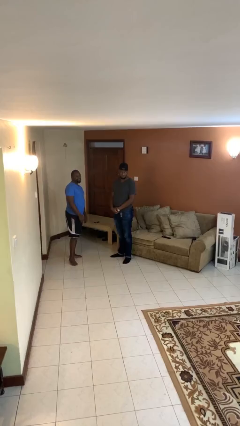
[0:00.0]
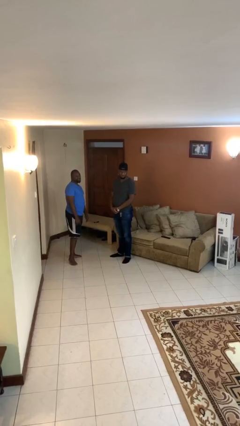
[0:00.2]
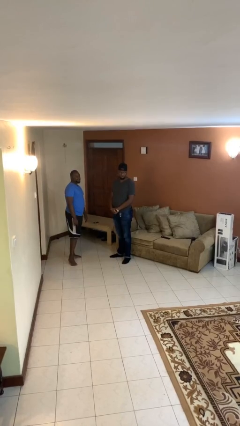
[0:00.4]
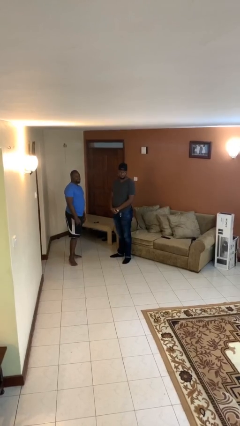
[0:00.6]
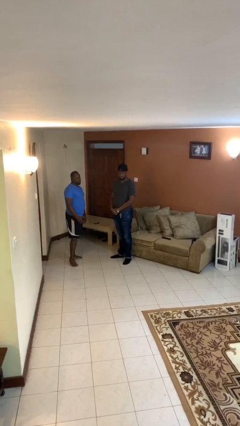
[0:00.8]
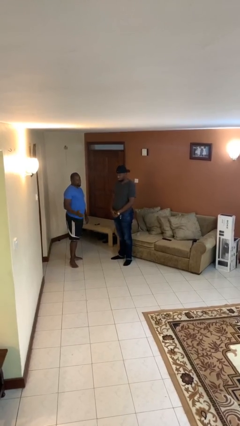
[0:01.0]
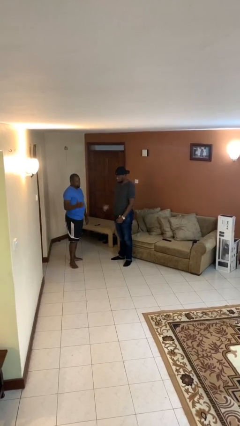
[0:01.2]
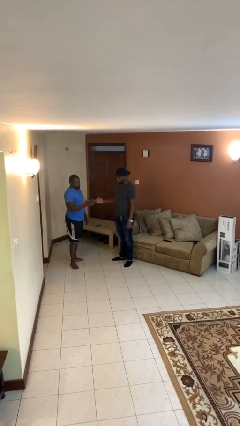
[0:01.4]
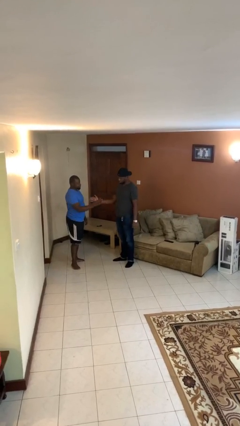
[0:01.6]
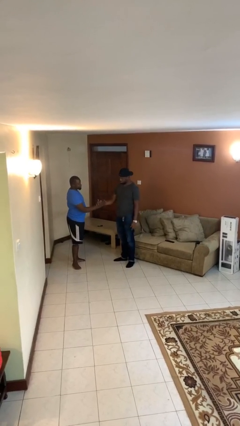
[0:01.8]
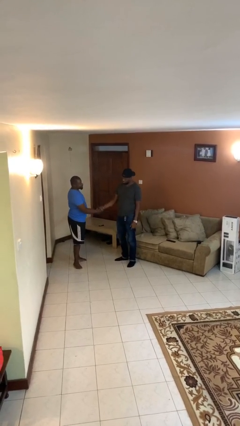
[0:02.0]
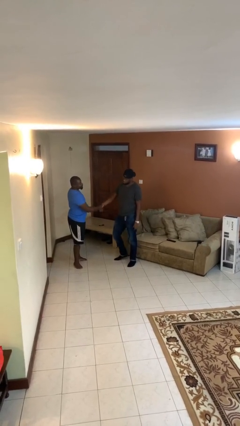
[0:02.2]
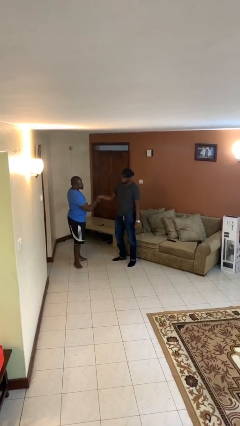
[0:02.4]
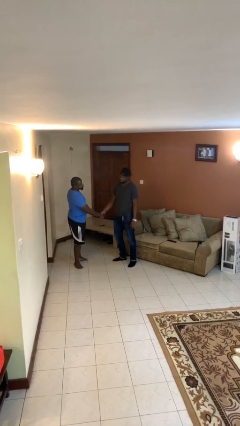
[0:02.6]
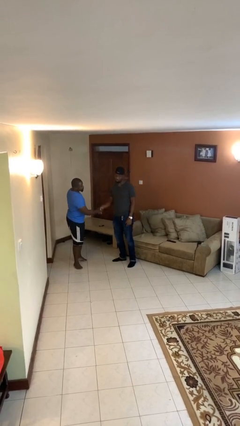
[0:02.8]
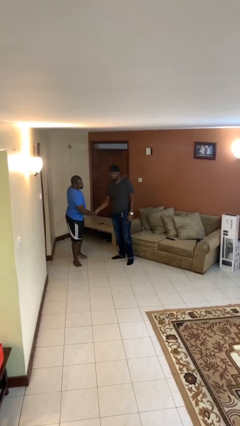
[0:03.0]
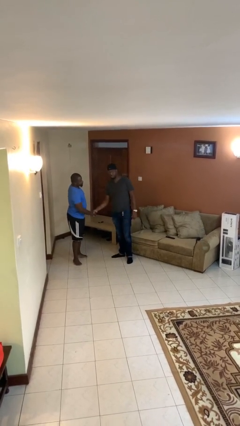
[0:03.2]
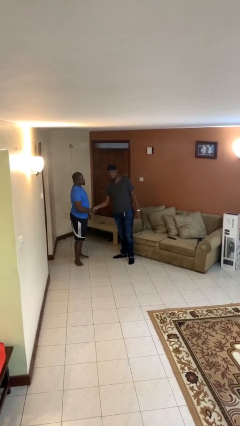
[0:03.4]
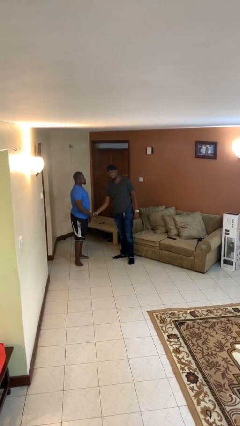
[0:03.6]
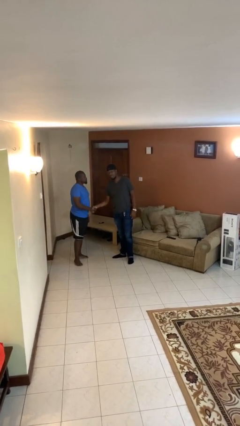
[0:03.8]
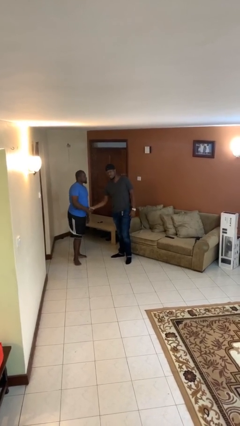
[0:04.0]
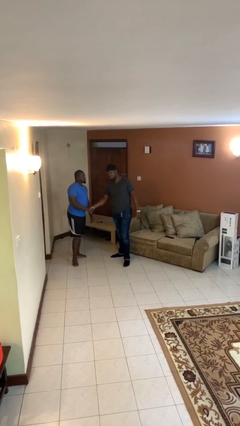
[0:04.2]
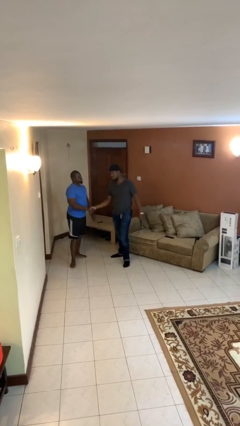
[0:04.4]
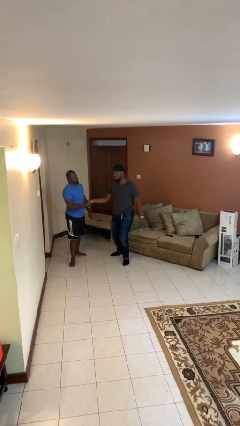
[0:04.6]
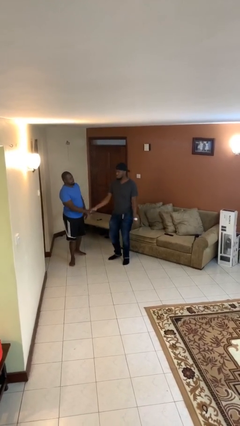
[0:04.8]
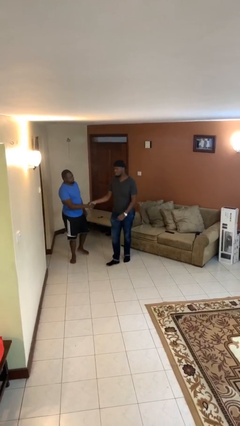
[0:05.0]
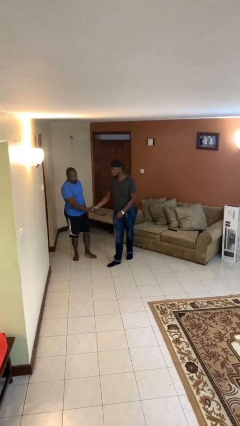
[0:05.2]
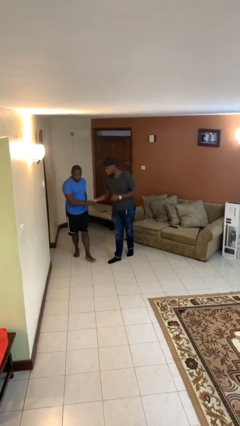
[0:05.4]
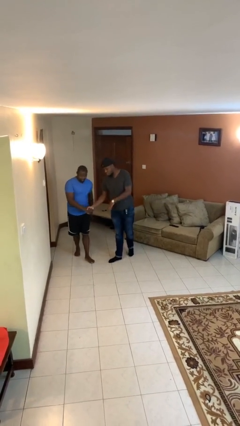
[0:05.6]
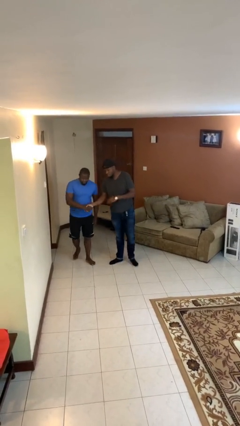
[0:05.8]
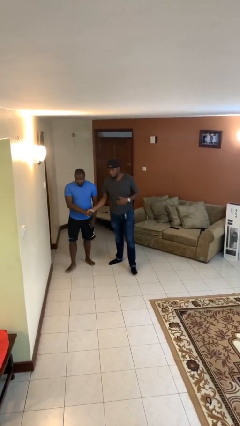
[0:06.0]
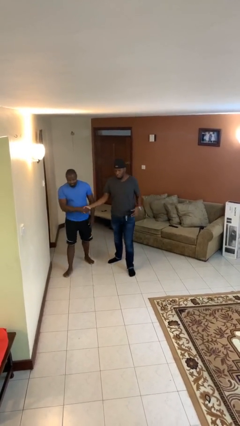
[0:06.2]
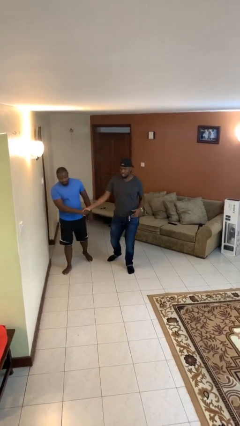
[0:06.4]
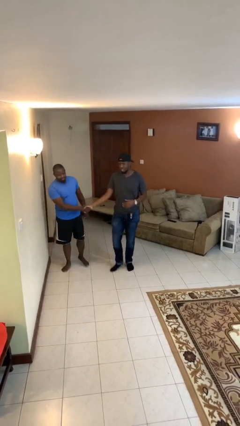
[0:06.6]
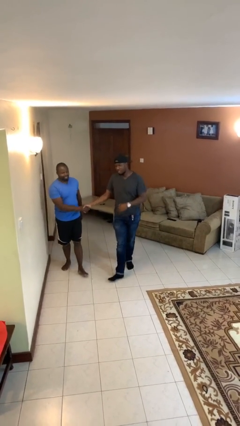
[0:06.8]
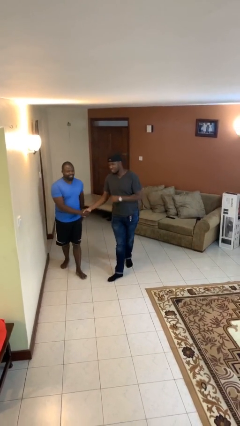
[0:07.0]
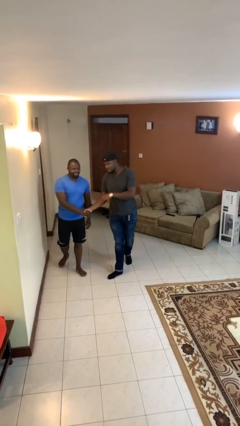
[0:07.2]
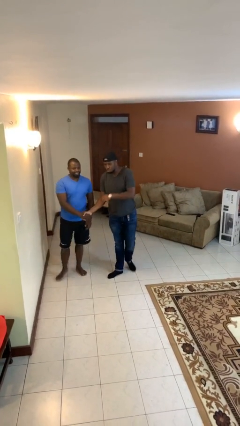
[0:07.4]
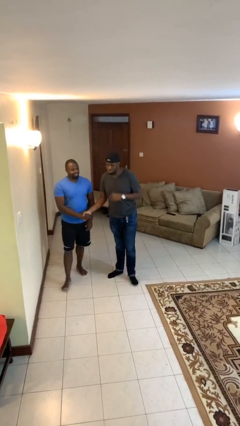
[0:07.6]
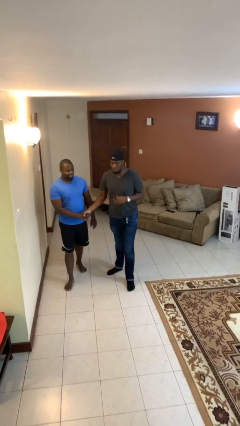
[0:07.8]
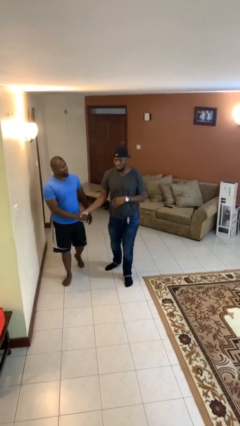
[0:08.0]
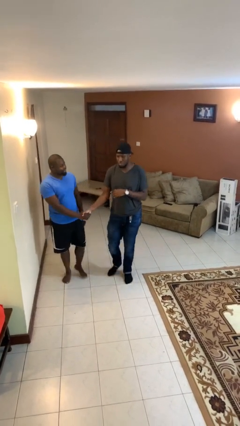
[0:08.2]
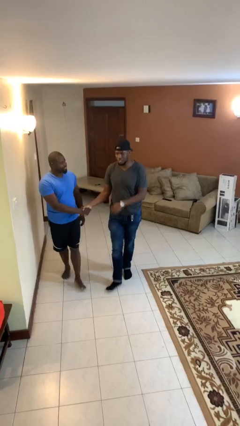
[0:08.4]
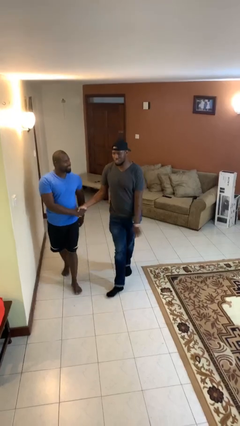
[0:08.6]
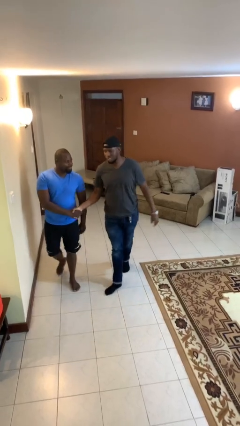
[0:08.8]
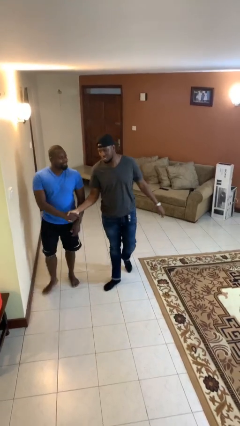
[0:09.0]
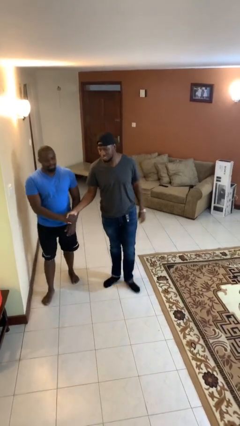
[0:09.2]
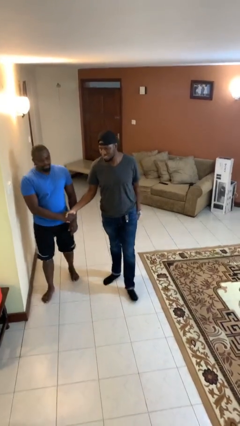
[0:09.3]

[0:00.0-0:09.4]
person holds hand

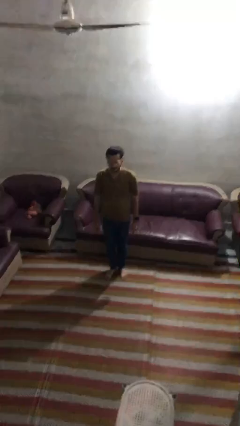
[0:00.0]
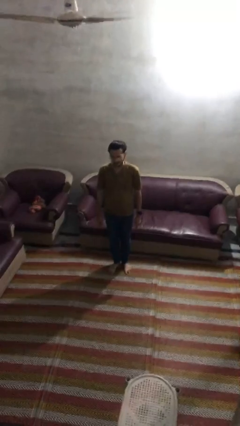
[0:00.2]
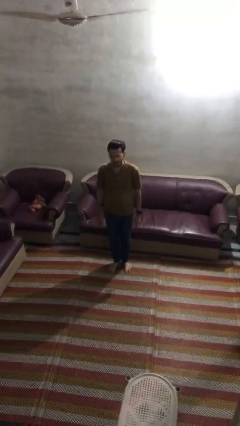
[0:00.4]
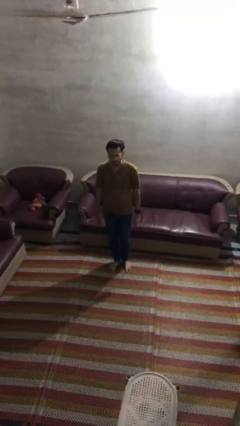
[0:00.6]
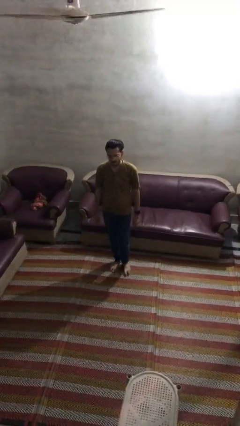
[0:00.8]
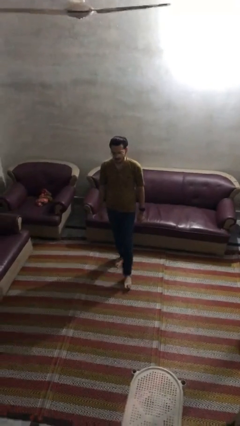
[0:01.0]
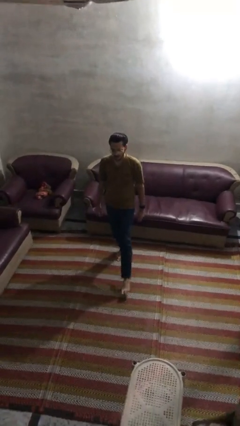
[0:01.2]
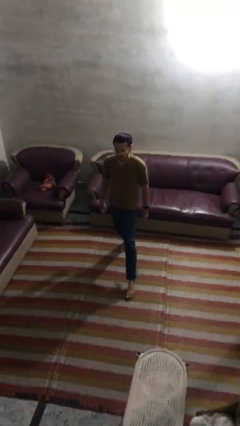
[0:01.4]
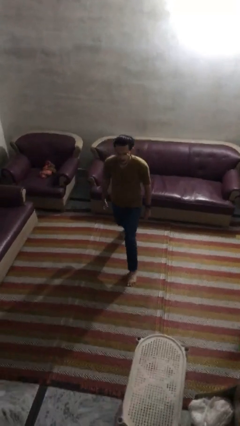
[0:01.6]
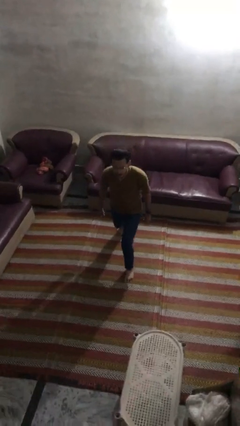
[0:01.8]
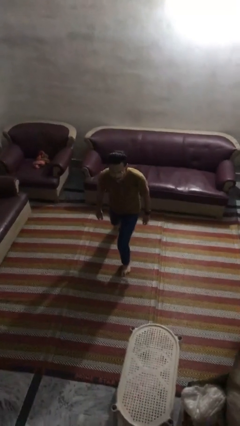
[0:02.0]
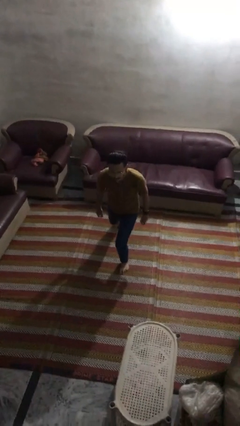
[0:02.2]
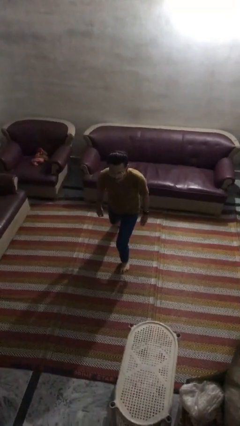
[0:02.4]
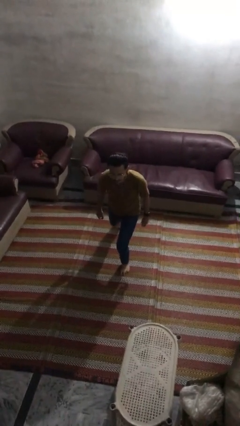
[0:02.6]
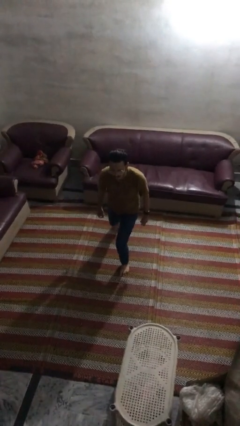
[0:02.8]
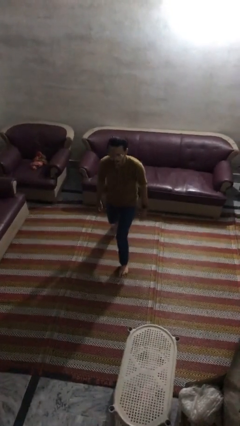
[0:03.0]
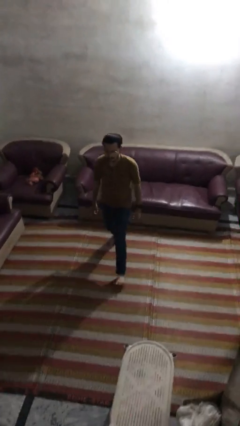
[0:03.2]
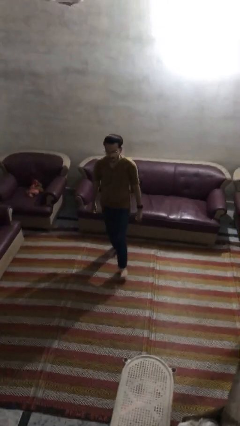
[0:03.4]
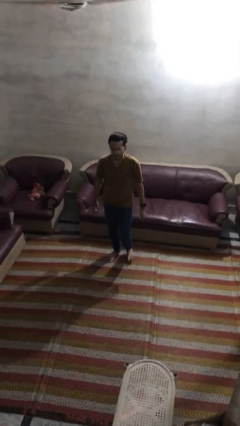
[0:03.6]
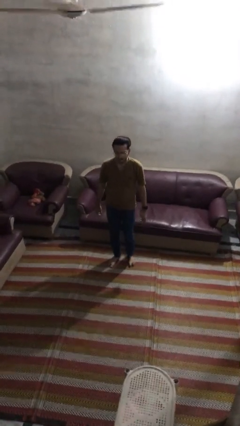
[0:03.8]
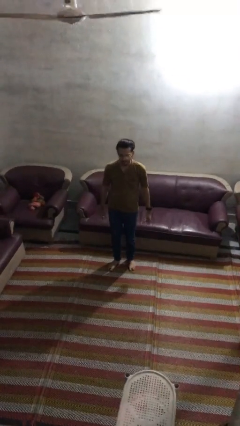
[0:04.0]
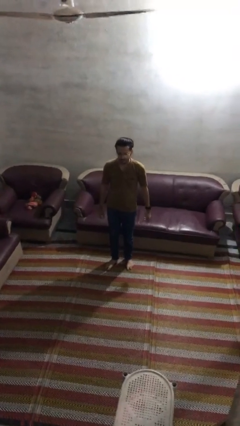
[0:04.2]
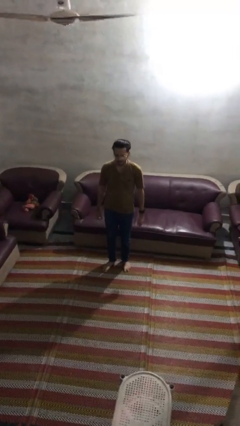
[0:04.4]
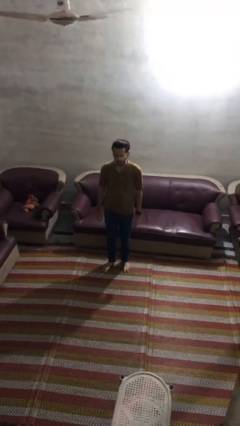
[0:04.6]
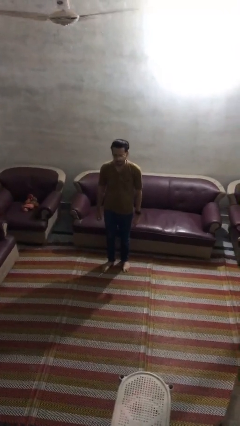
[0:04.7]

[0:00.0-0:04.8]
person exercises with lunges

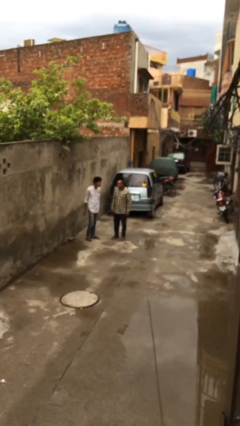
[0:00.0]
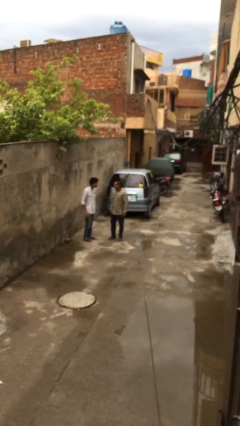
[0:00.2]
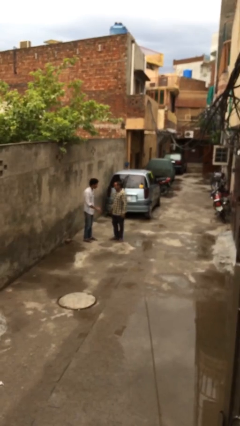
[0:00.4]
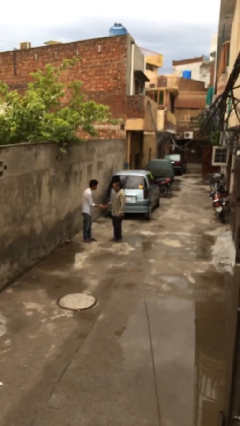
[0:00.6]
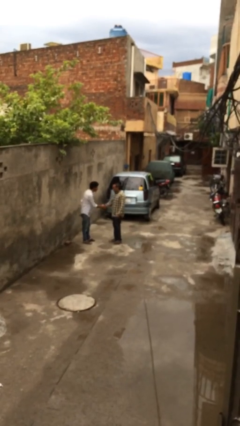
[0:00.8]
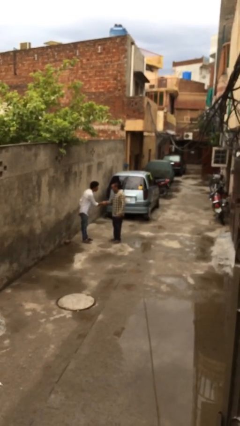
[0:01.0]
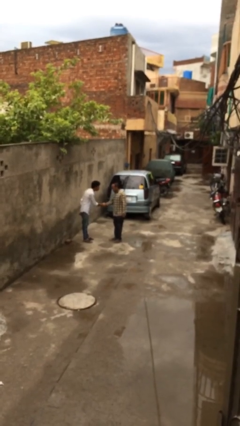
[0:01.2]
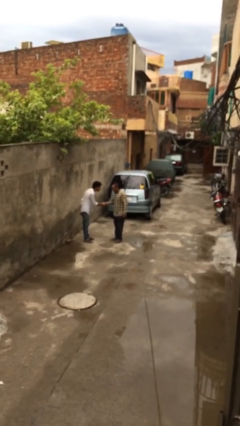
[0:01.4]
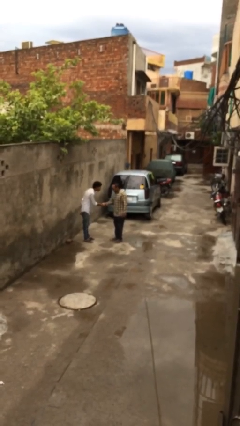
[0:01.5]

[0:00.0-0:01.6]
person shakes hand

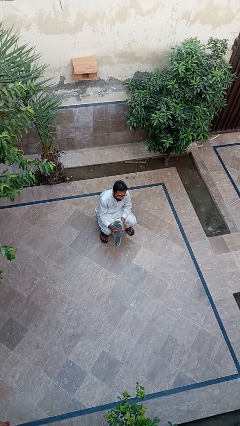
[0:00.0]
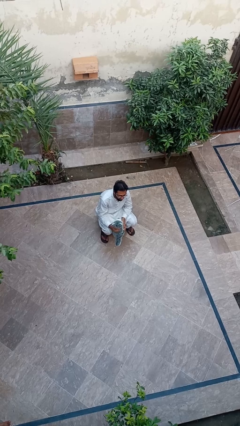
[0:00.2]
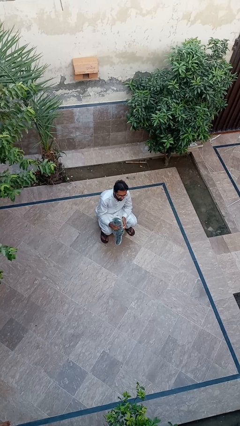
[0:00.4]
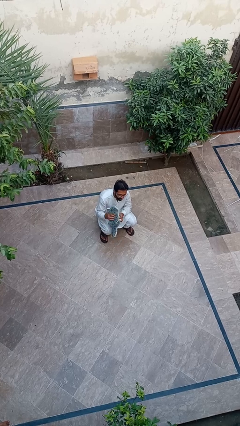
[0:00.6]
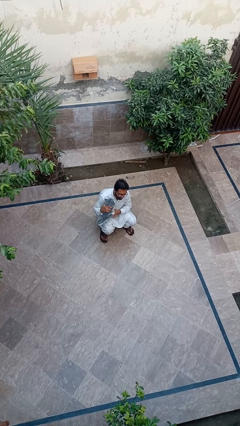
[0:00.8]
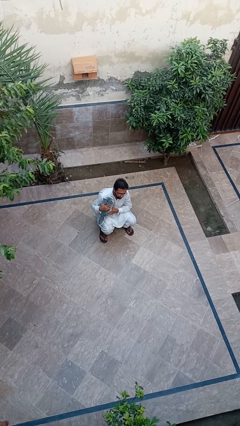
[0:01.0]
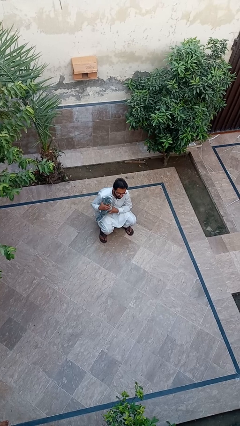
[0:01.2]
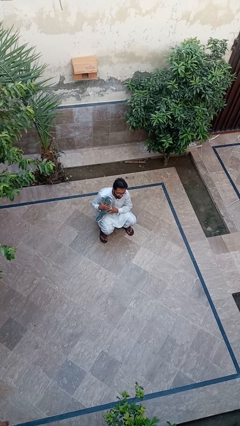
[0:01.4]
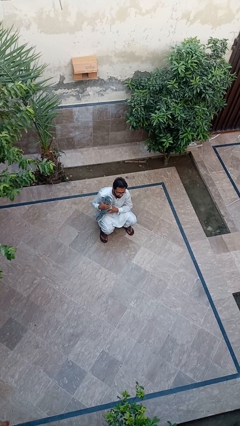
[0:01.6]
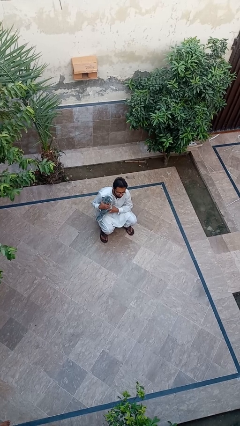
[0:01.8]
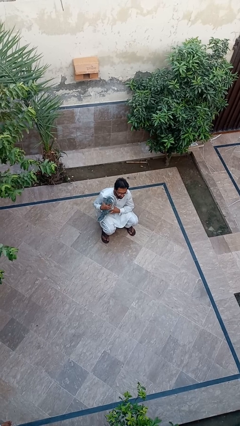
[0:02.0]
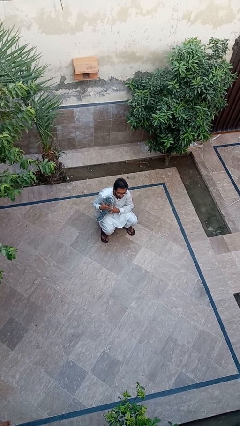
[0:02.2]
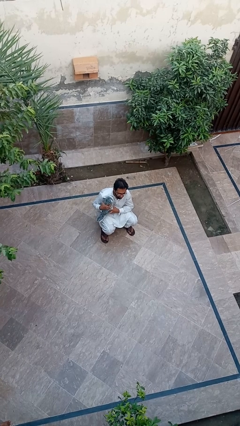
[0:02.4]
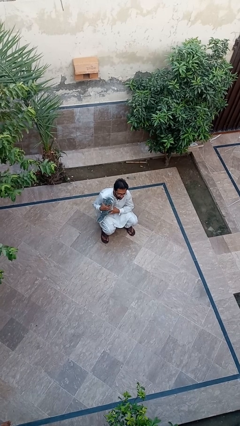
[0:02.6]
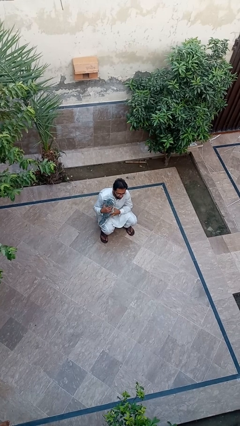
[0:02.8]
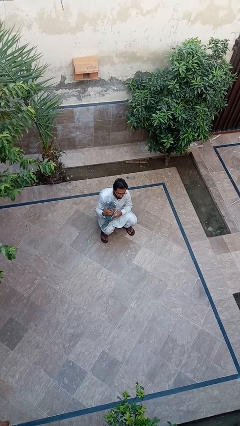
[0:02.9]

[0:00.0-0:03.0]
person hugs dog
